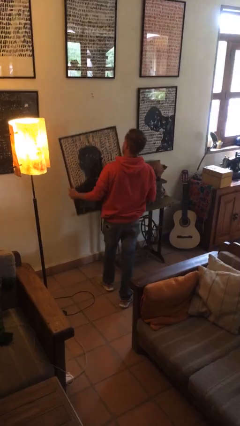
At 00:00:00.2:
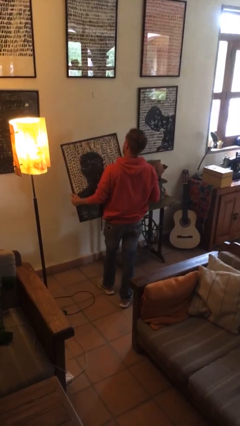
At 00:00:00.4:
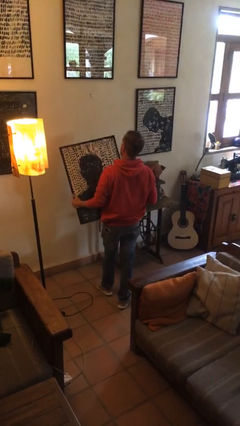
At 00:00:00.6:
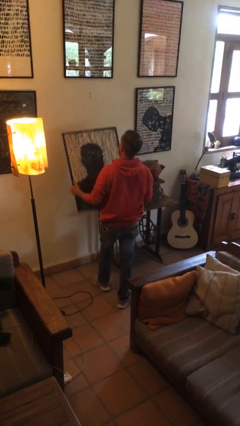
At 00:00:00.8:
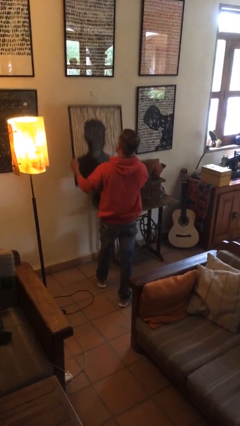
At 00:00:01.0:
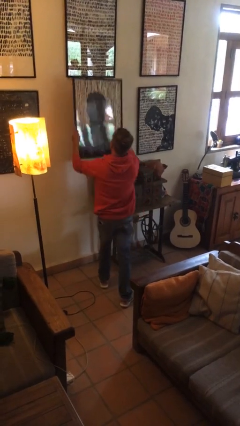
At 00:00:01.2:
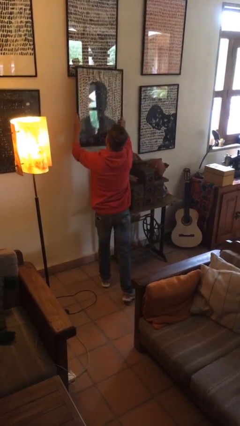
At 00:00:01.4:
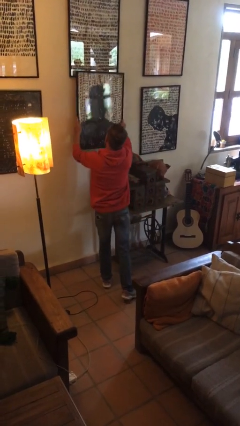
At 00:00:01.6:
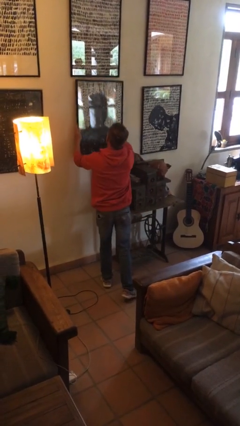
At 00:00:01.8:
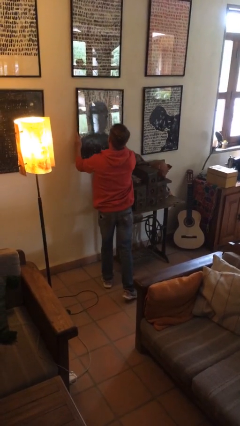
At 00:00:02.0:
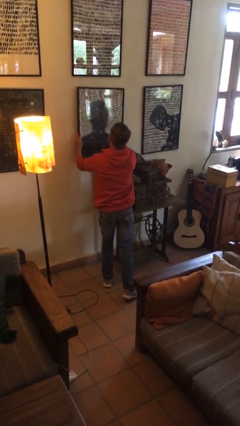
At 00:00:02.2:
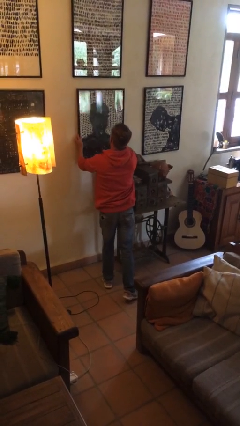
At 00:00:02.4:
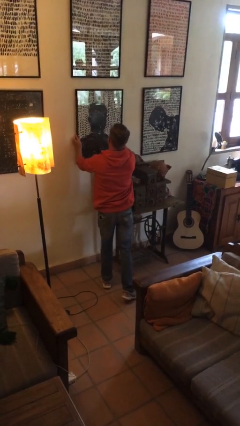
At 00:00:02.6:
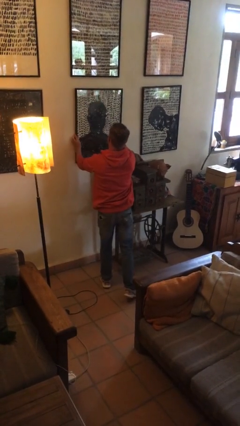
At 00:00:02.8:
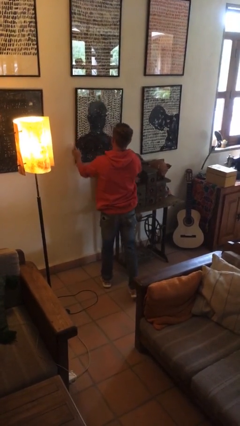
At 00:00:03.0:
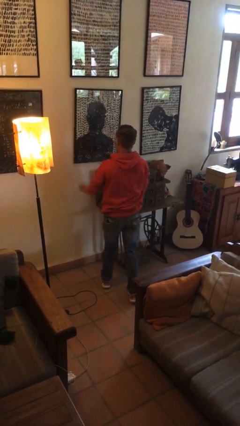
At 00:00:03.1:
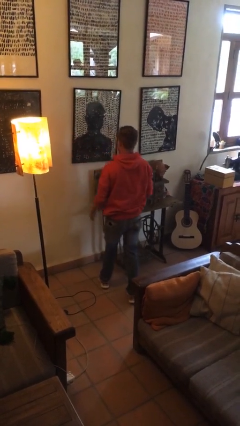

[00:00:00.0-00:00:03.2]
person puts up picture frame

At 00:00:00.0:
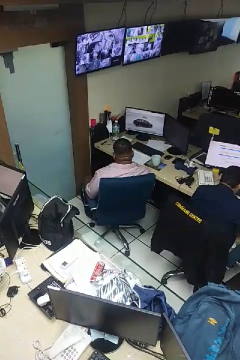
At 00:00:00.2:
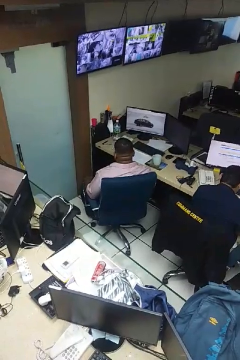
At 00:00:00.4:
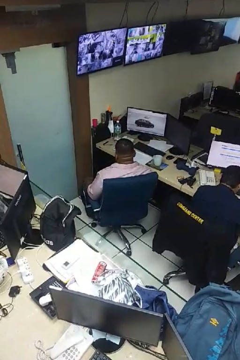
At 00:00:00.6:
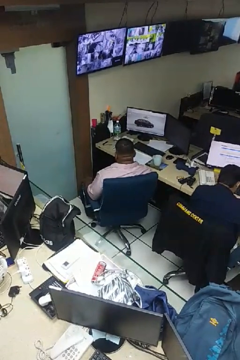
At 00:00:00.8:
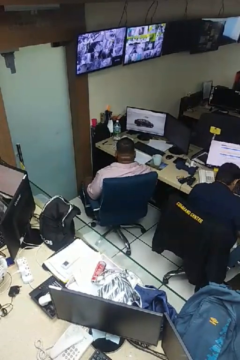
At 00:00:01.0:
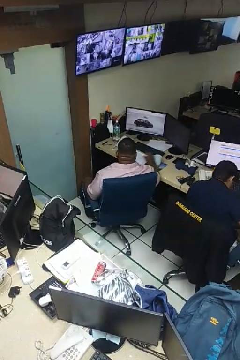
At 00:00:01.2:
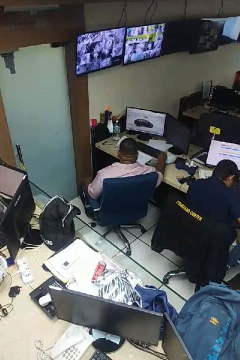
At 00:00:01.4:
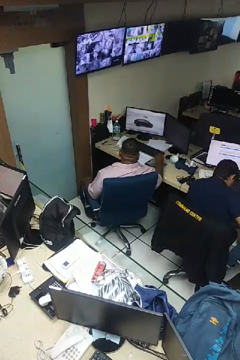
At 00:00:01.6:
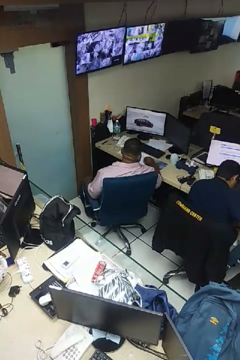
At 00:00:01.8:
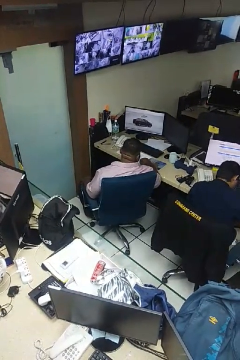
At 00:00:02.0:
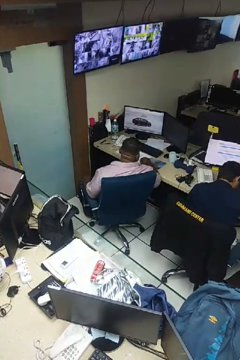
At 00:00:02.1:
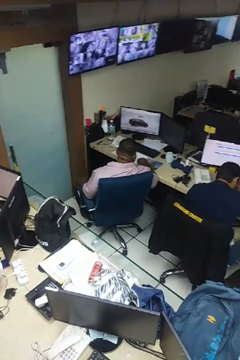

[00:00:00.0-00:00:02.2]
person knocks over glass

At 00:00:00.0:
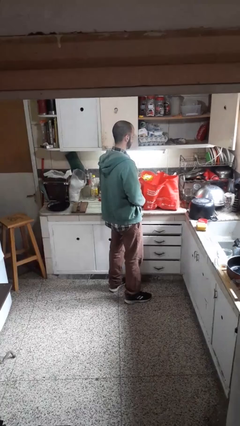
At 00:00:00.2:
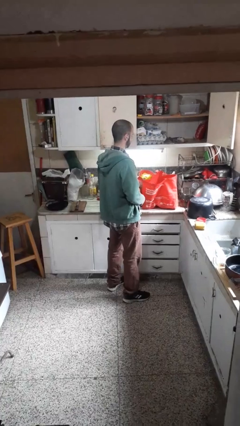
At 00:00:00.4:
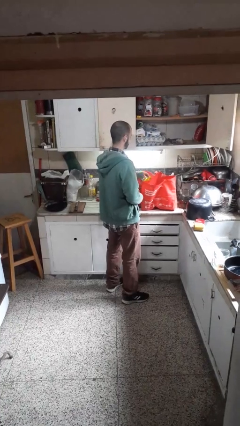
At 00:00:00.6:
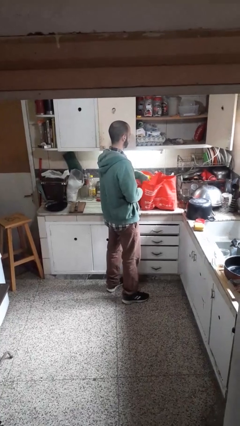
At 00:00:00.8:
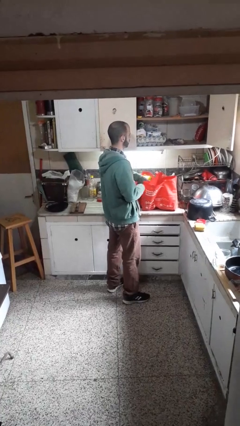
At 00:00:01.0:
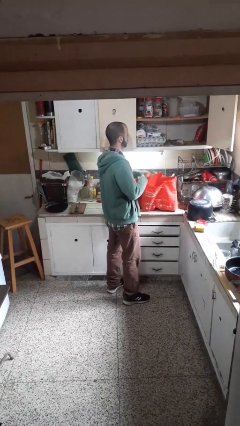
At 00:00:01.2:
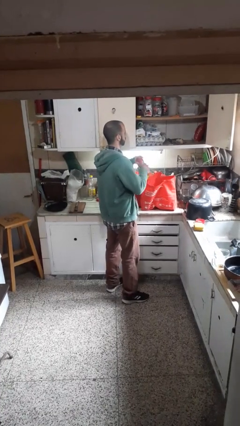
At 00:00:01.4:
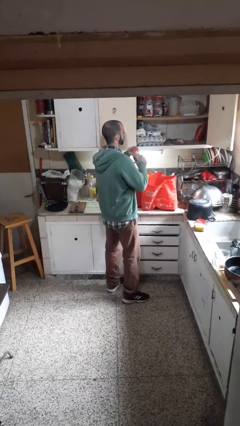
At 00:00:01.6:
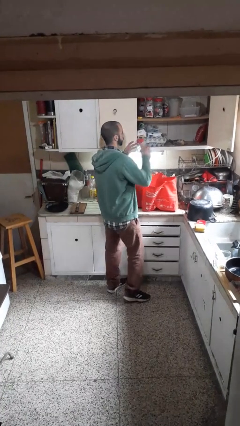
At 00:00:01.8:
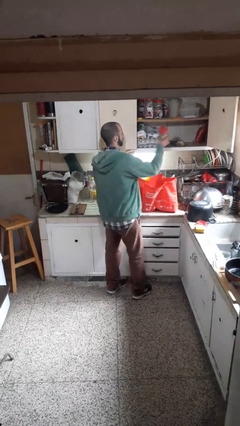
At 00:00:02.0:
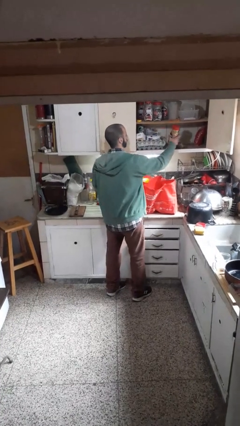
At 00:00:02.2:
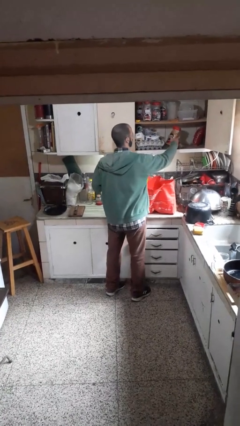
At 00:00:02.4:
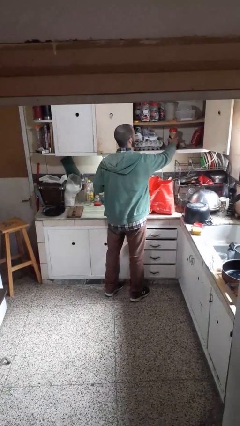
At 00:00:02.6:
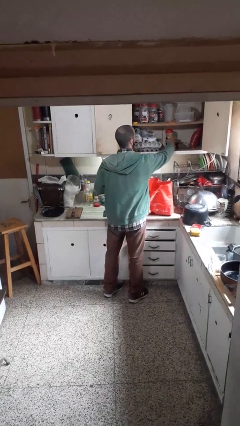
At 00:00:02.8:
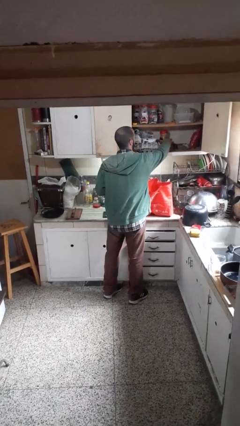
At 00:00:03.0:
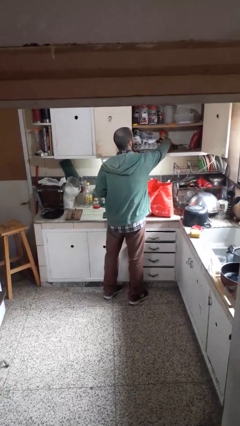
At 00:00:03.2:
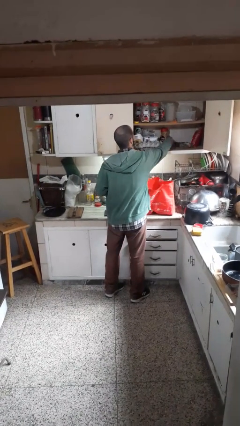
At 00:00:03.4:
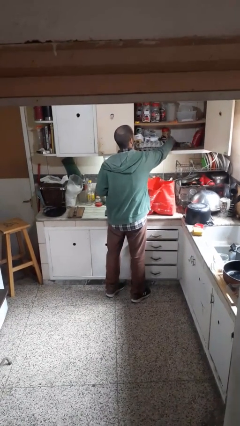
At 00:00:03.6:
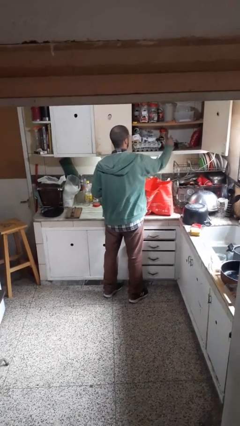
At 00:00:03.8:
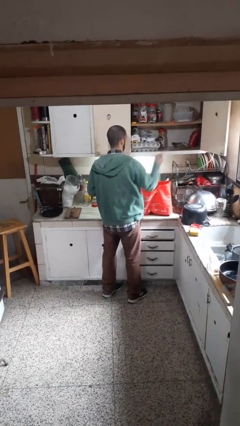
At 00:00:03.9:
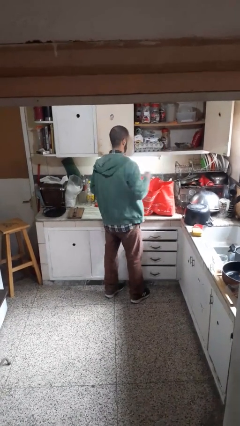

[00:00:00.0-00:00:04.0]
person loads groceries into cabinet

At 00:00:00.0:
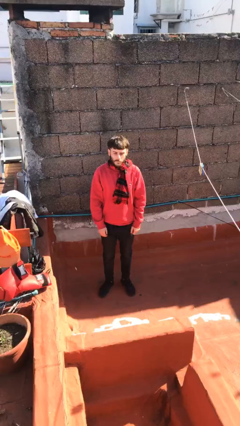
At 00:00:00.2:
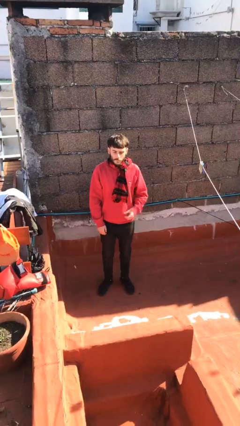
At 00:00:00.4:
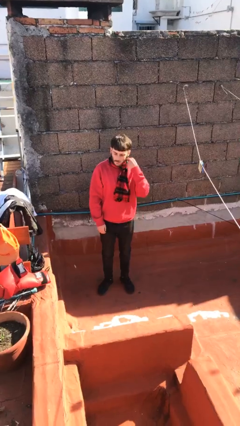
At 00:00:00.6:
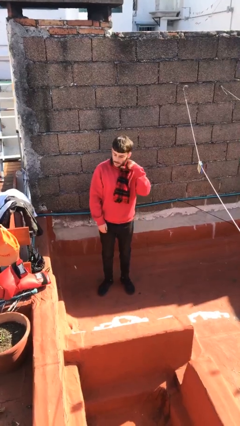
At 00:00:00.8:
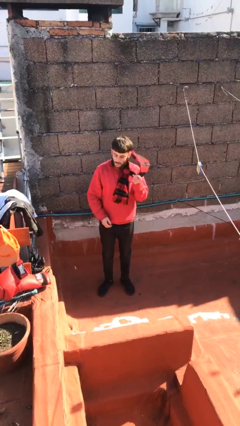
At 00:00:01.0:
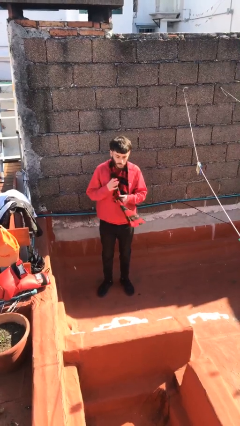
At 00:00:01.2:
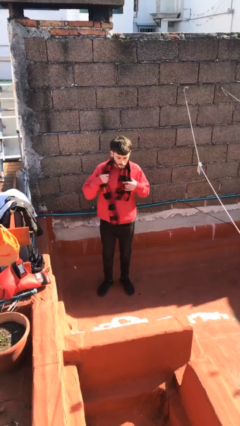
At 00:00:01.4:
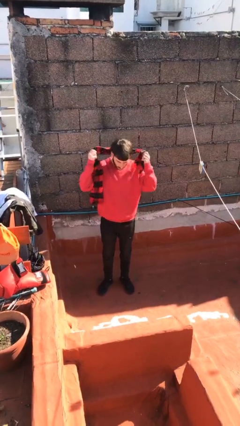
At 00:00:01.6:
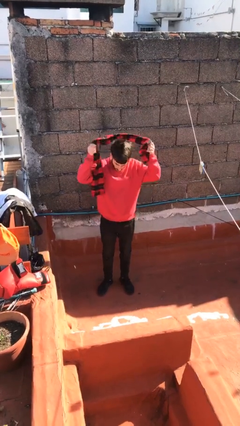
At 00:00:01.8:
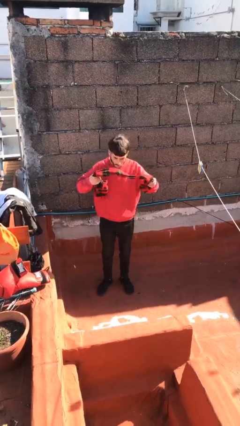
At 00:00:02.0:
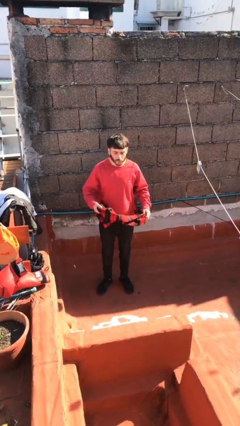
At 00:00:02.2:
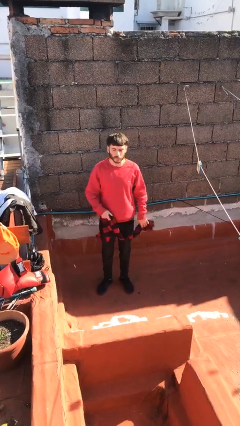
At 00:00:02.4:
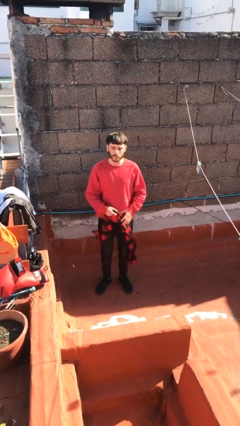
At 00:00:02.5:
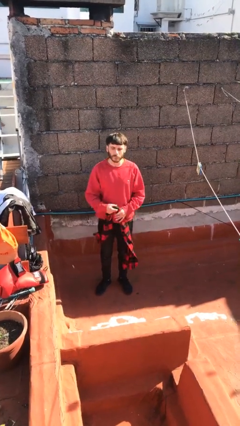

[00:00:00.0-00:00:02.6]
person takes off scarf

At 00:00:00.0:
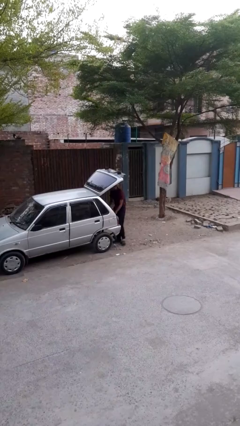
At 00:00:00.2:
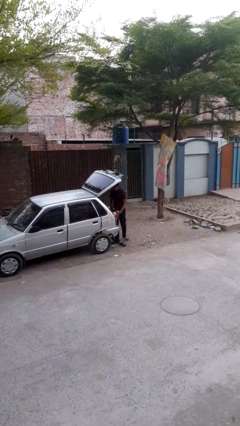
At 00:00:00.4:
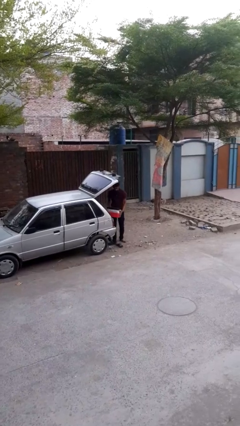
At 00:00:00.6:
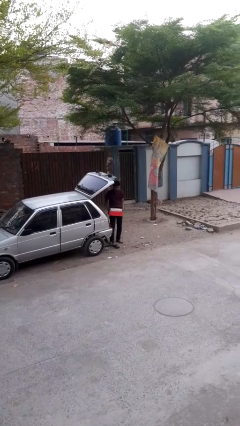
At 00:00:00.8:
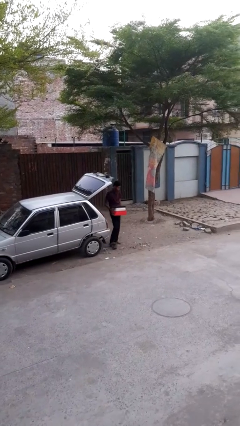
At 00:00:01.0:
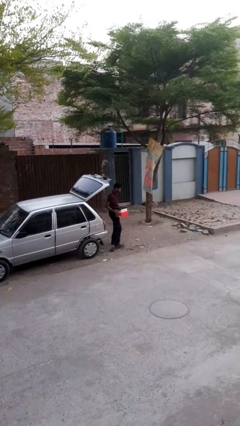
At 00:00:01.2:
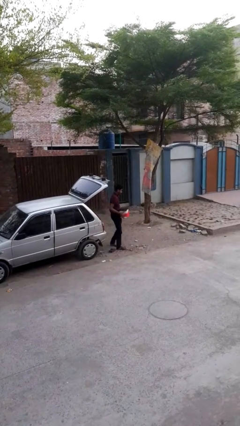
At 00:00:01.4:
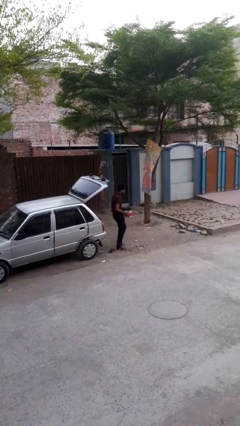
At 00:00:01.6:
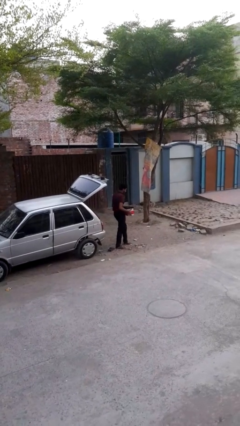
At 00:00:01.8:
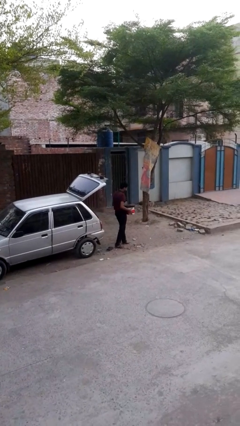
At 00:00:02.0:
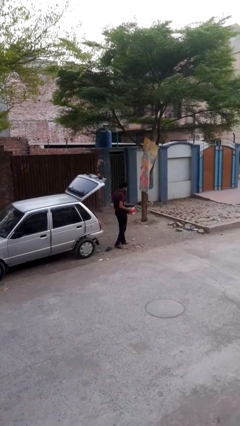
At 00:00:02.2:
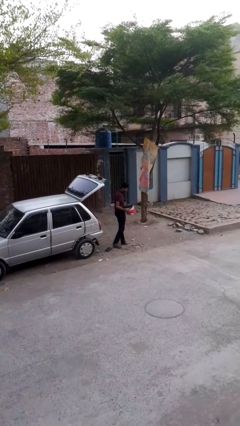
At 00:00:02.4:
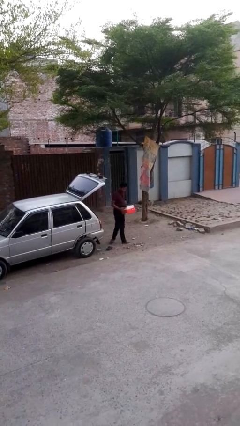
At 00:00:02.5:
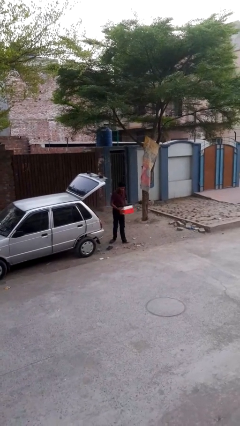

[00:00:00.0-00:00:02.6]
person unloads car

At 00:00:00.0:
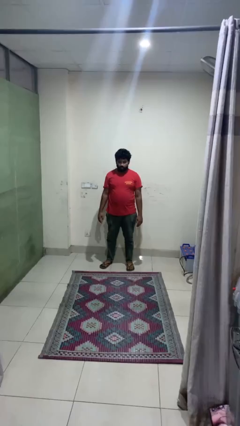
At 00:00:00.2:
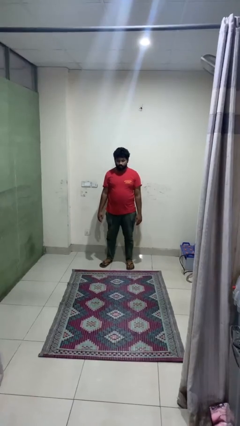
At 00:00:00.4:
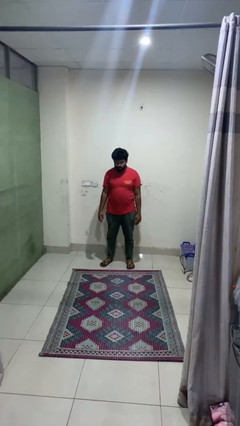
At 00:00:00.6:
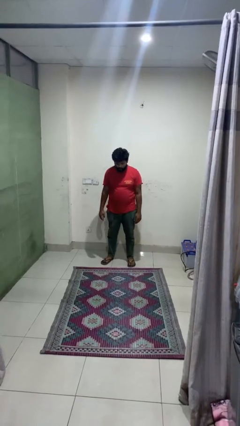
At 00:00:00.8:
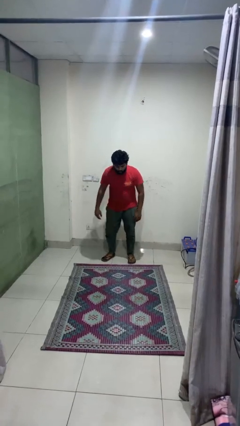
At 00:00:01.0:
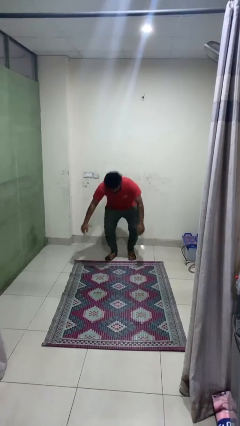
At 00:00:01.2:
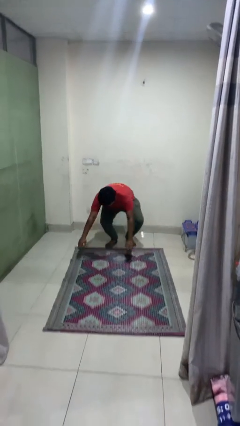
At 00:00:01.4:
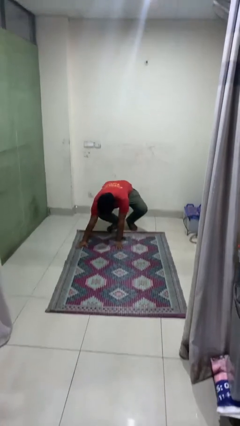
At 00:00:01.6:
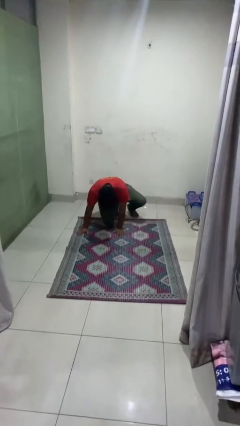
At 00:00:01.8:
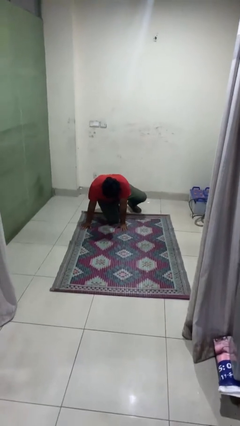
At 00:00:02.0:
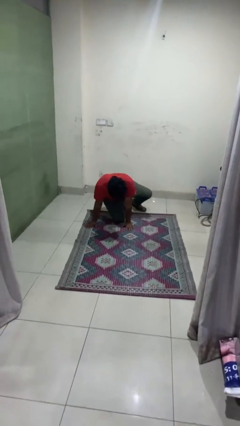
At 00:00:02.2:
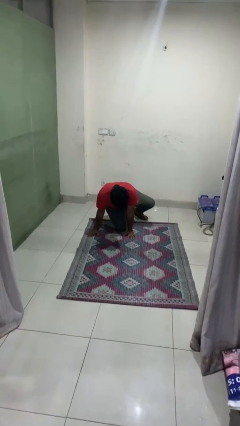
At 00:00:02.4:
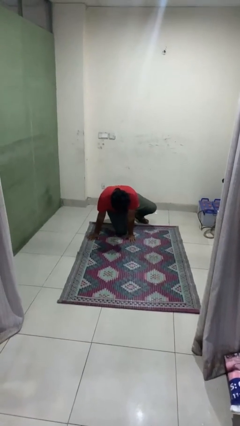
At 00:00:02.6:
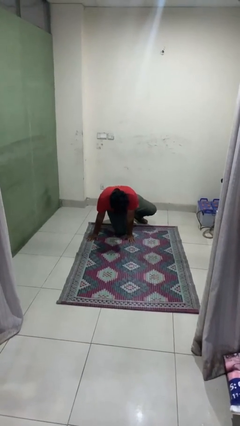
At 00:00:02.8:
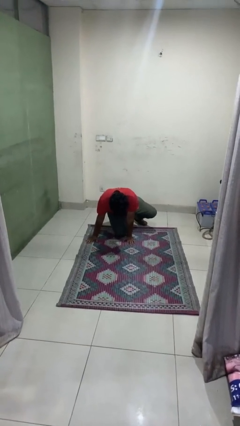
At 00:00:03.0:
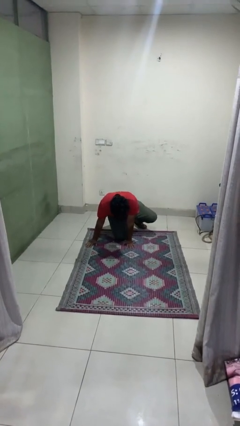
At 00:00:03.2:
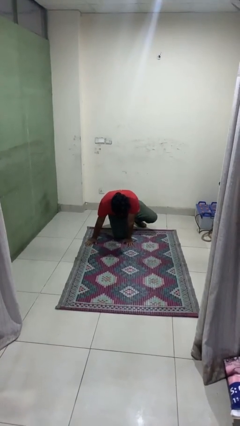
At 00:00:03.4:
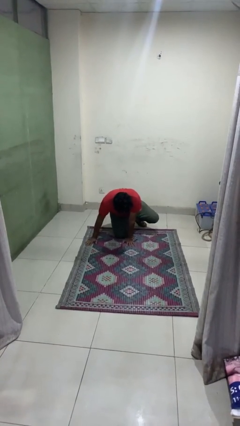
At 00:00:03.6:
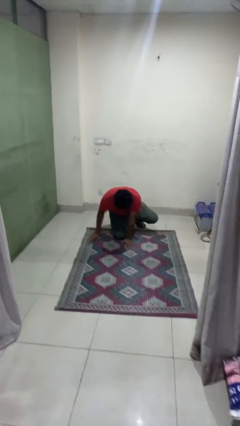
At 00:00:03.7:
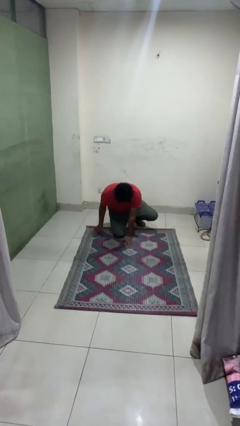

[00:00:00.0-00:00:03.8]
person falls while standing
